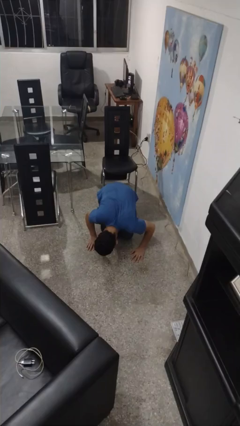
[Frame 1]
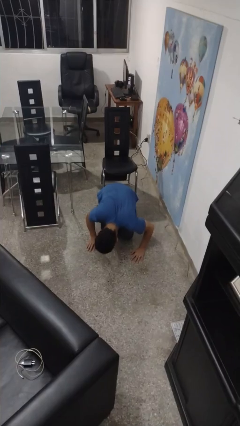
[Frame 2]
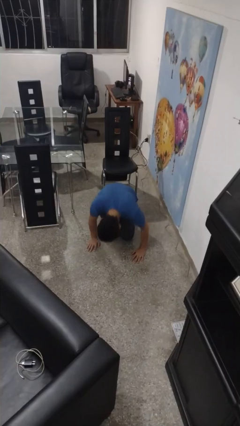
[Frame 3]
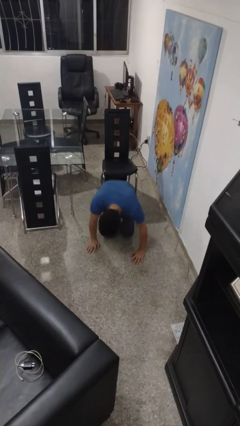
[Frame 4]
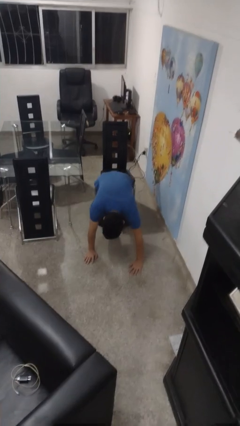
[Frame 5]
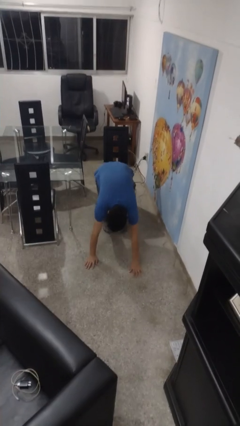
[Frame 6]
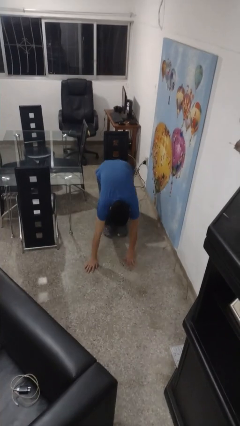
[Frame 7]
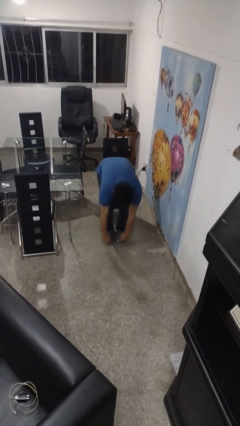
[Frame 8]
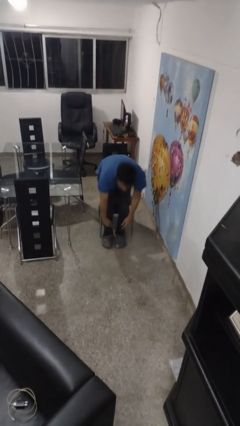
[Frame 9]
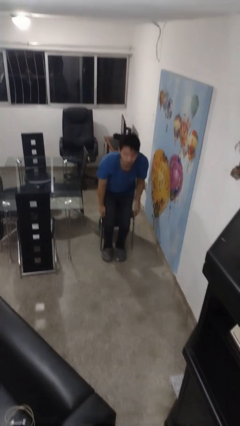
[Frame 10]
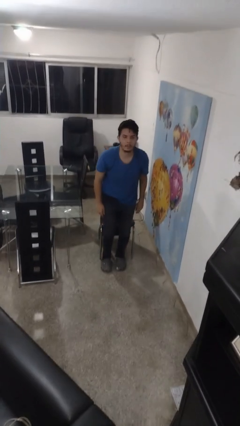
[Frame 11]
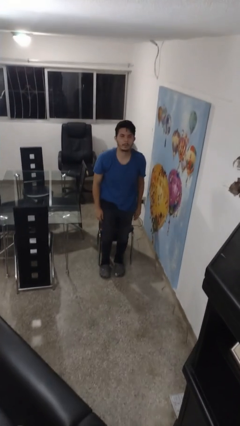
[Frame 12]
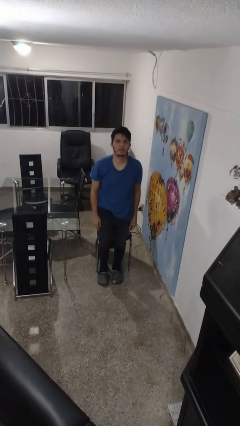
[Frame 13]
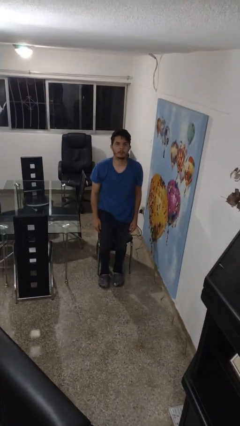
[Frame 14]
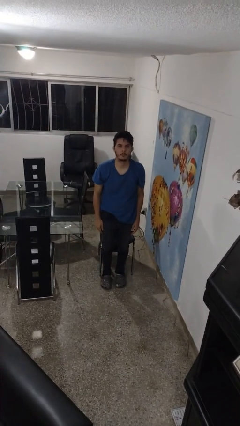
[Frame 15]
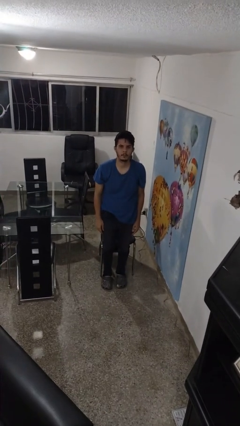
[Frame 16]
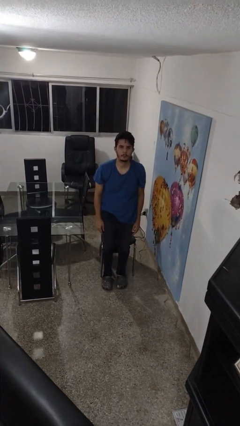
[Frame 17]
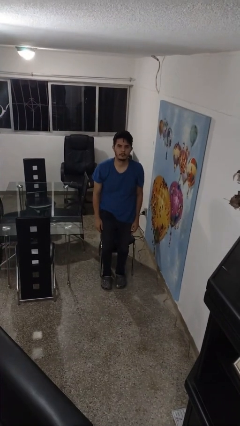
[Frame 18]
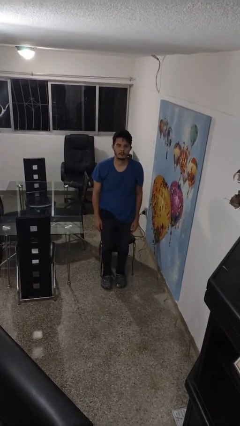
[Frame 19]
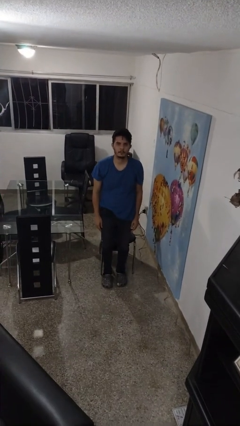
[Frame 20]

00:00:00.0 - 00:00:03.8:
person stands up from floor

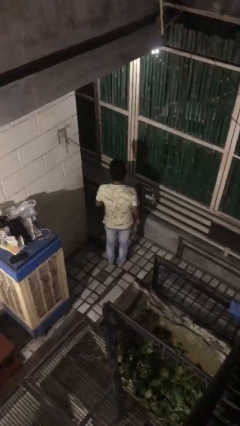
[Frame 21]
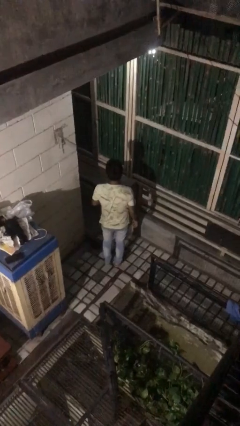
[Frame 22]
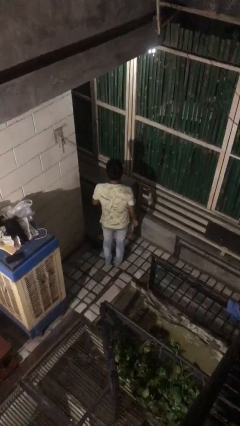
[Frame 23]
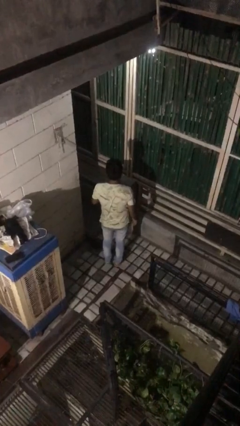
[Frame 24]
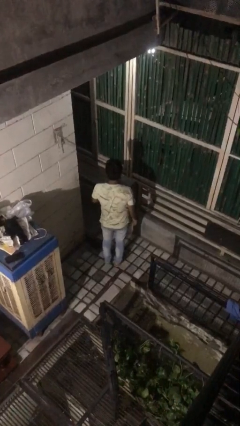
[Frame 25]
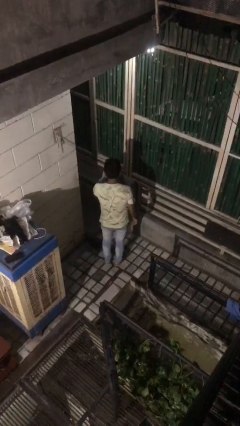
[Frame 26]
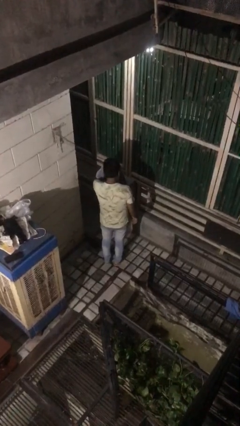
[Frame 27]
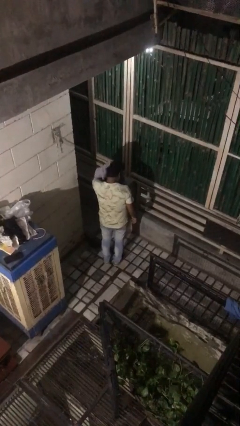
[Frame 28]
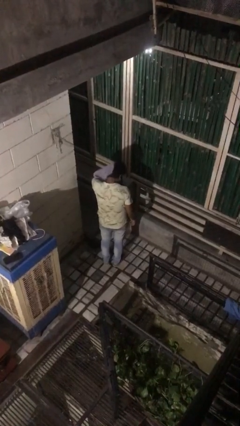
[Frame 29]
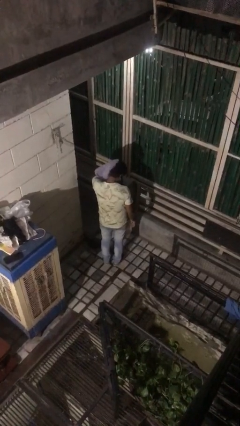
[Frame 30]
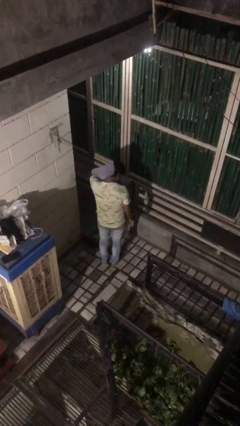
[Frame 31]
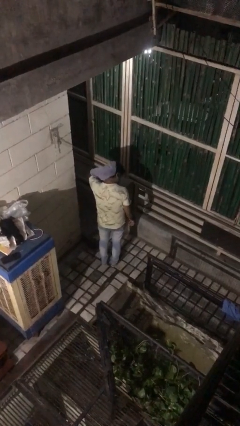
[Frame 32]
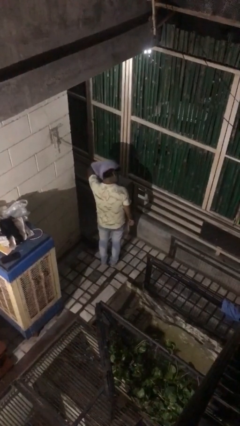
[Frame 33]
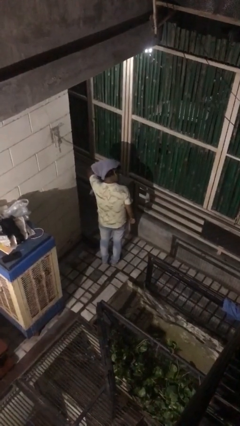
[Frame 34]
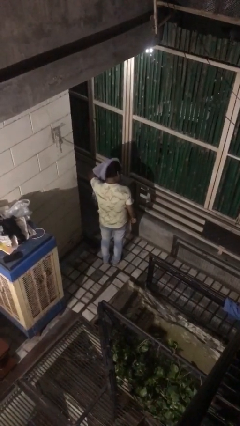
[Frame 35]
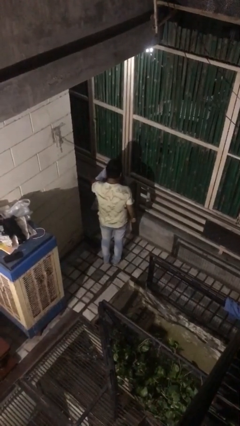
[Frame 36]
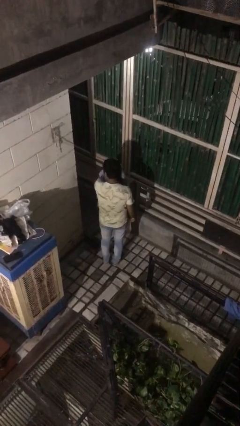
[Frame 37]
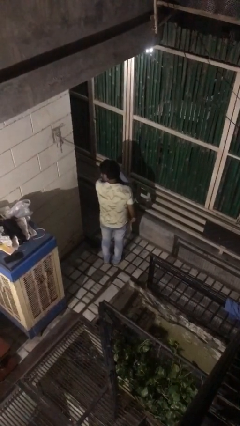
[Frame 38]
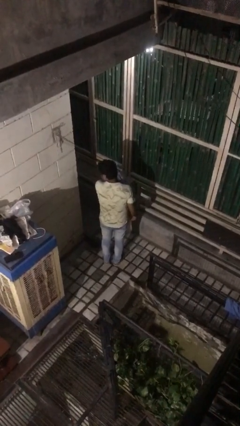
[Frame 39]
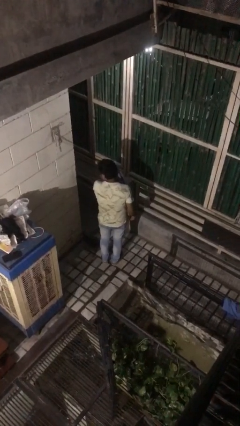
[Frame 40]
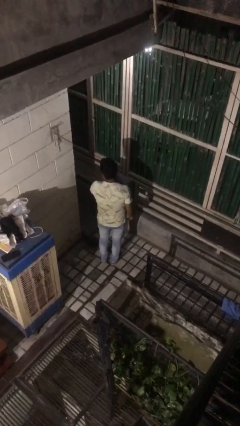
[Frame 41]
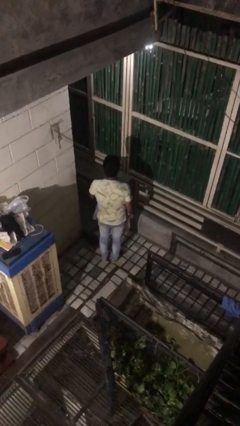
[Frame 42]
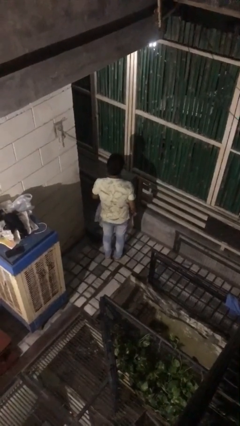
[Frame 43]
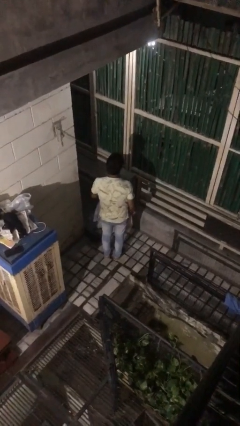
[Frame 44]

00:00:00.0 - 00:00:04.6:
person dries hair with towel

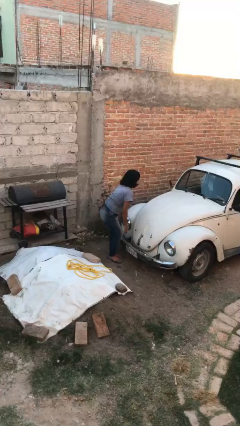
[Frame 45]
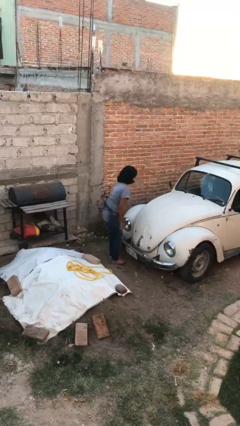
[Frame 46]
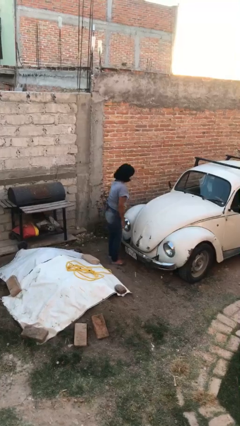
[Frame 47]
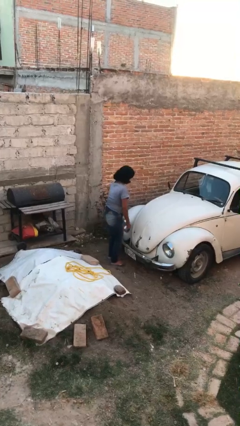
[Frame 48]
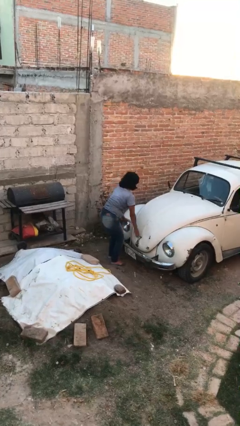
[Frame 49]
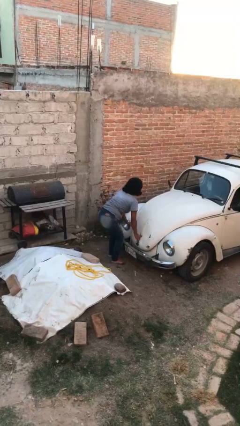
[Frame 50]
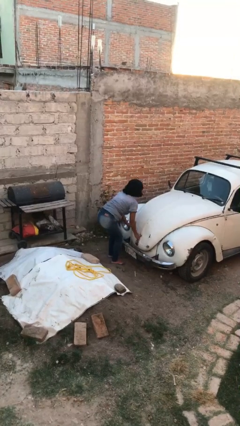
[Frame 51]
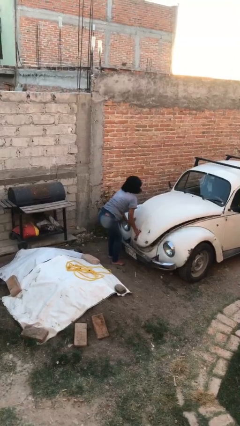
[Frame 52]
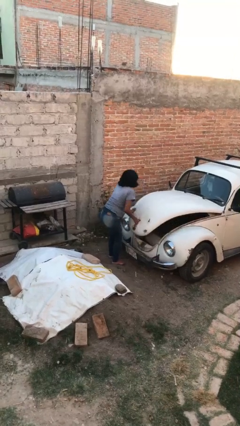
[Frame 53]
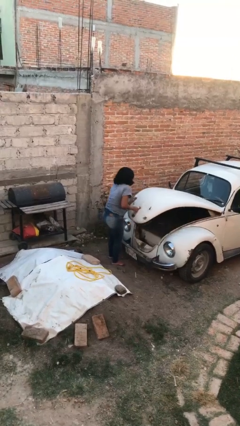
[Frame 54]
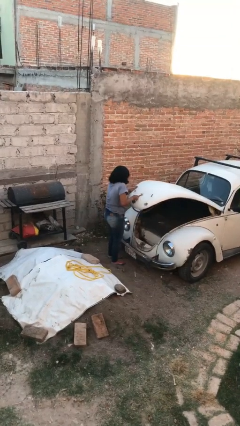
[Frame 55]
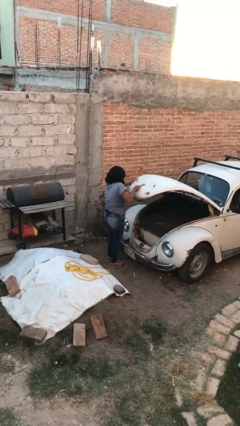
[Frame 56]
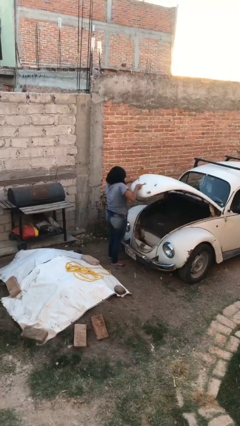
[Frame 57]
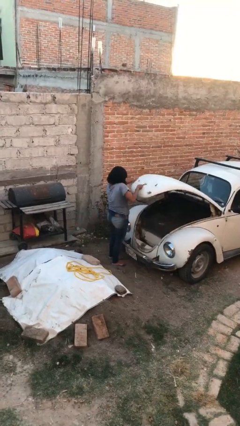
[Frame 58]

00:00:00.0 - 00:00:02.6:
person opens car trunk

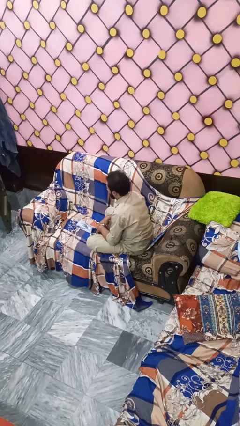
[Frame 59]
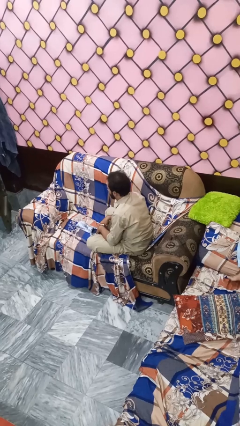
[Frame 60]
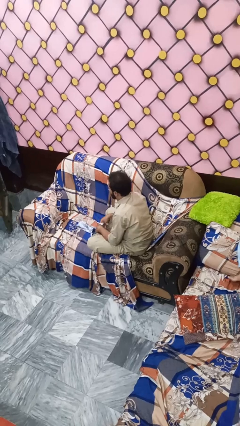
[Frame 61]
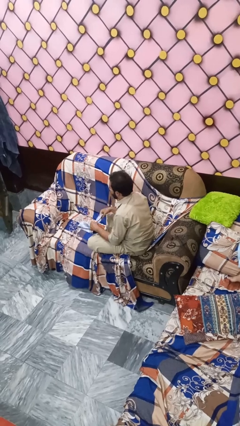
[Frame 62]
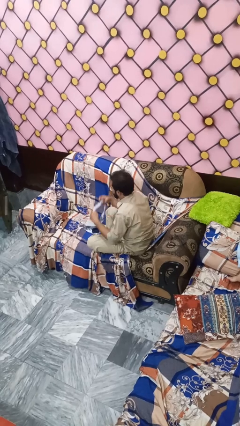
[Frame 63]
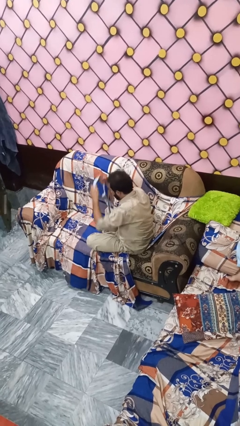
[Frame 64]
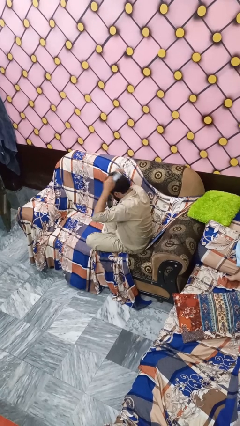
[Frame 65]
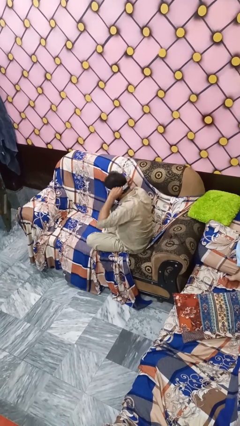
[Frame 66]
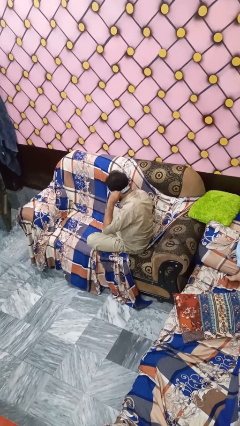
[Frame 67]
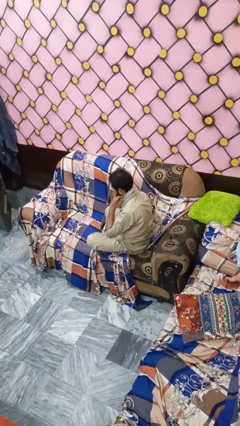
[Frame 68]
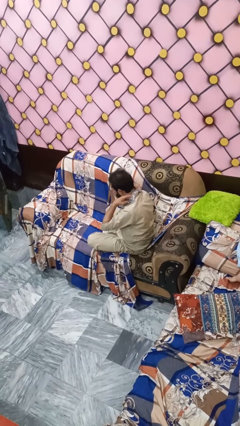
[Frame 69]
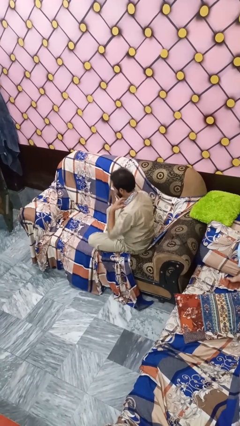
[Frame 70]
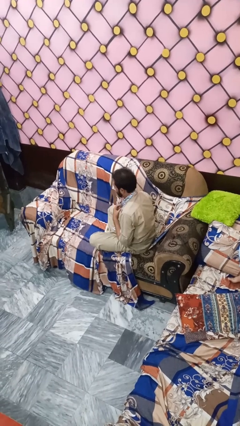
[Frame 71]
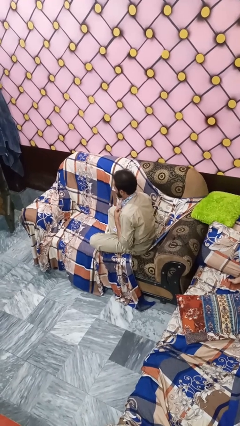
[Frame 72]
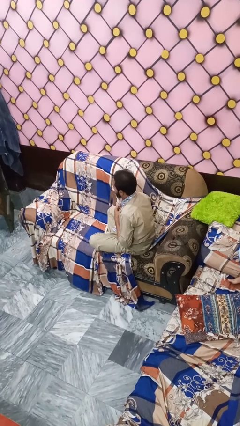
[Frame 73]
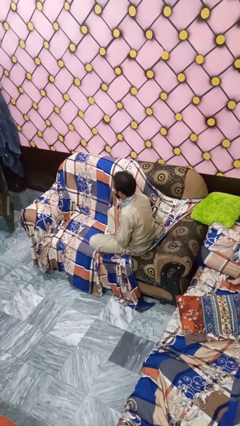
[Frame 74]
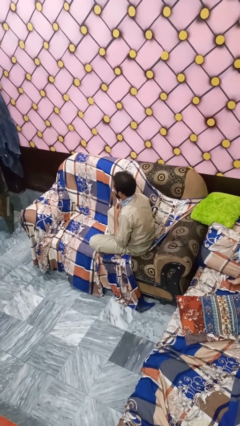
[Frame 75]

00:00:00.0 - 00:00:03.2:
person puts on necktie

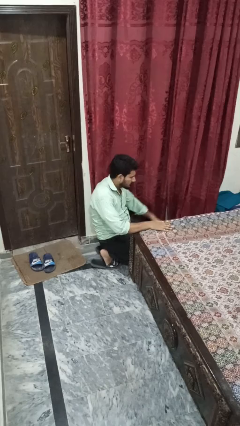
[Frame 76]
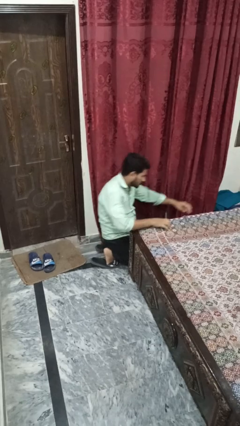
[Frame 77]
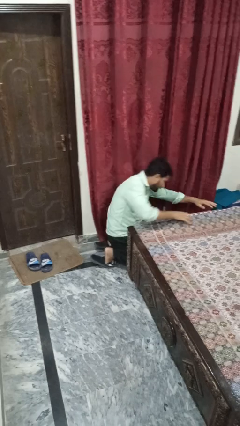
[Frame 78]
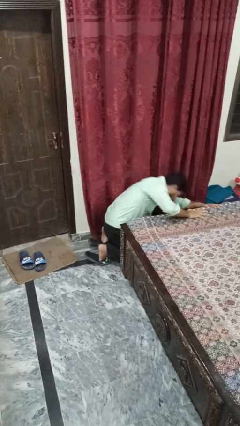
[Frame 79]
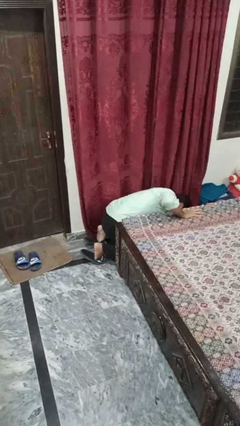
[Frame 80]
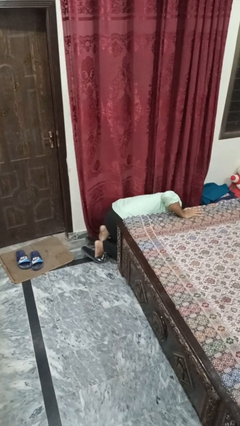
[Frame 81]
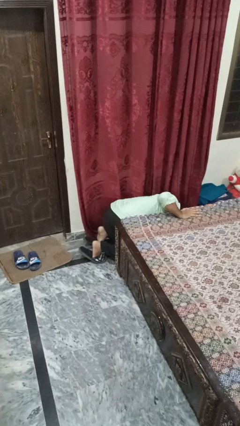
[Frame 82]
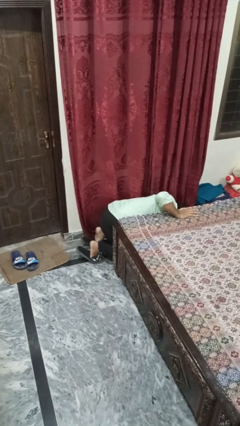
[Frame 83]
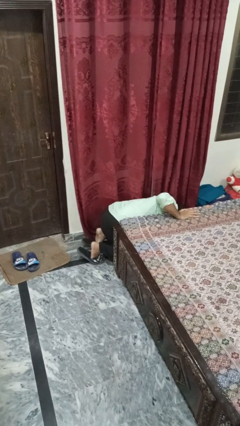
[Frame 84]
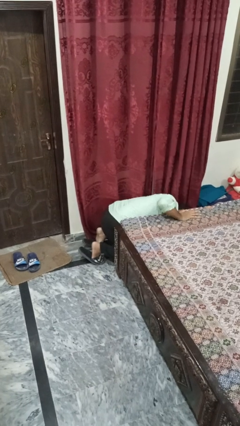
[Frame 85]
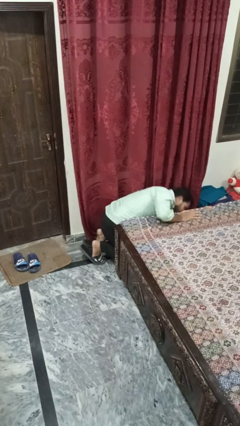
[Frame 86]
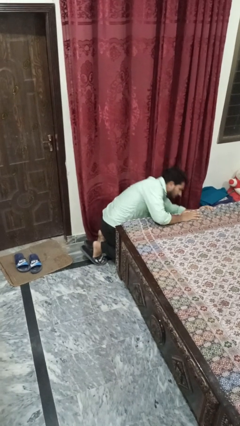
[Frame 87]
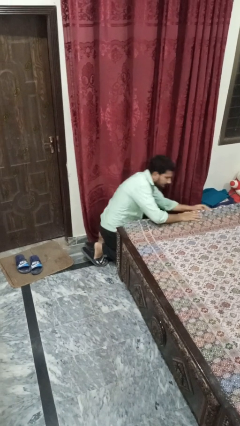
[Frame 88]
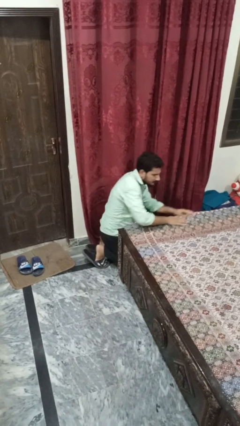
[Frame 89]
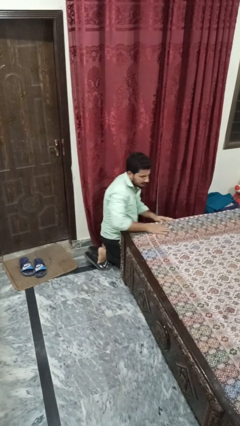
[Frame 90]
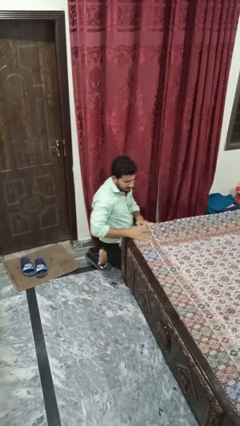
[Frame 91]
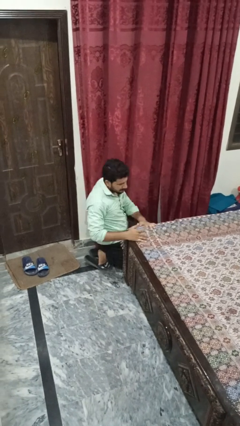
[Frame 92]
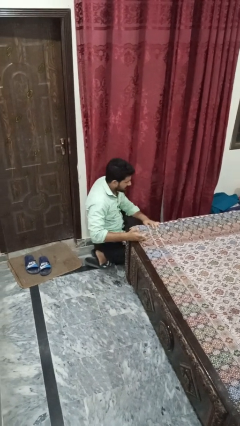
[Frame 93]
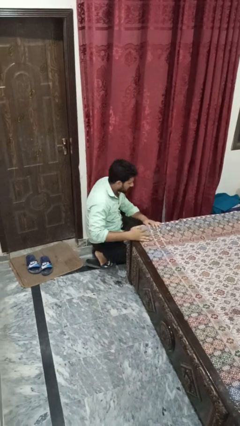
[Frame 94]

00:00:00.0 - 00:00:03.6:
person searches under bed
